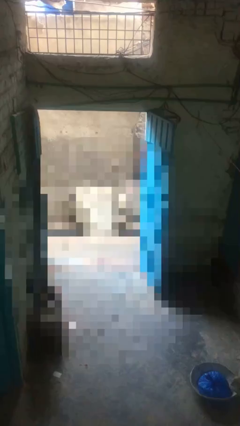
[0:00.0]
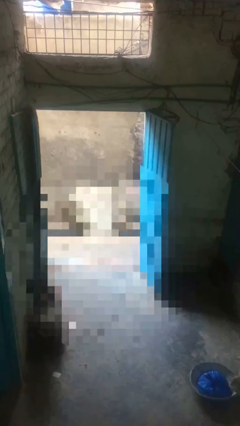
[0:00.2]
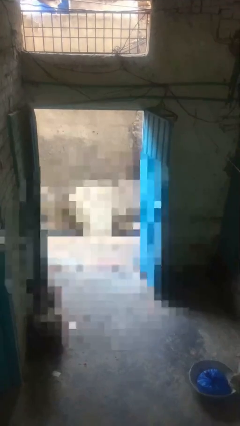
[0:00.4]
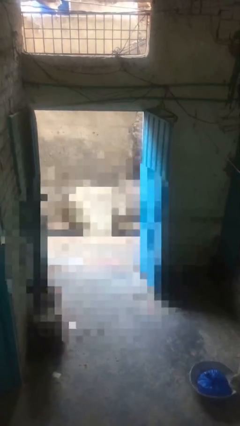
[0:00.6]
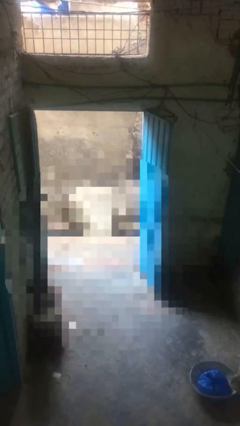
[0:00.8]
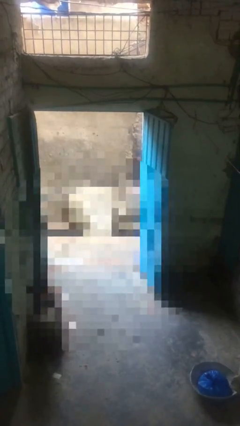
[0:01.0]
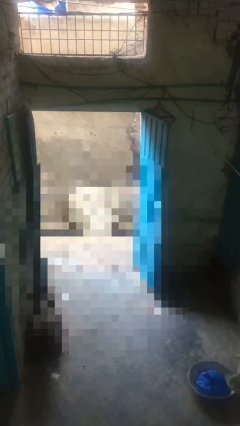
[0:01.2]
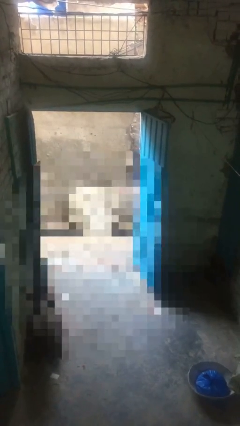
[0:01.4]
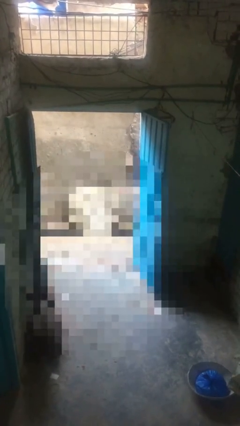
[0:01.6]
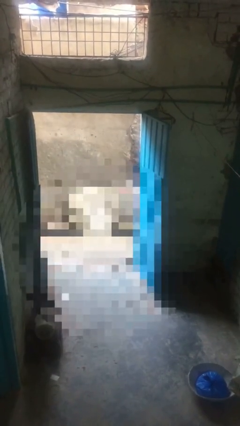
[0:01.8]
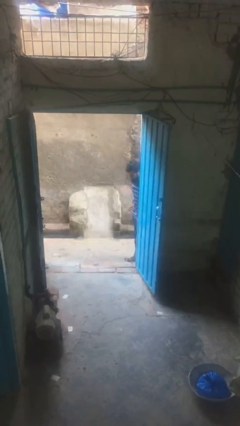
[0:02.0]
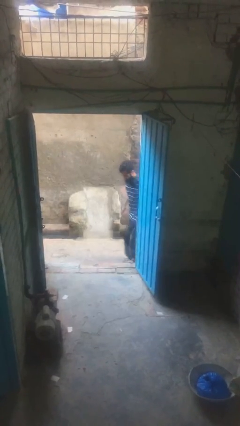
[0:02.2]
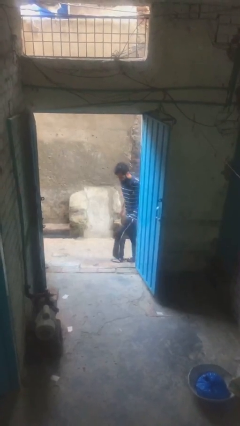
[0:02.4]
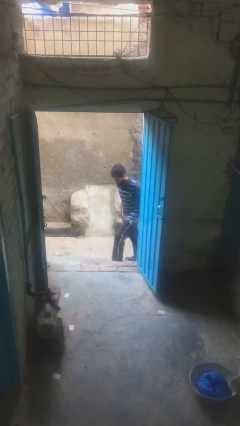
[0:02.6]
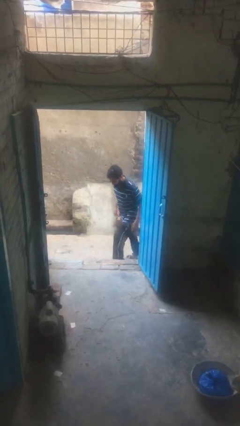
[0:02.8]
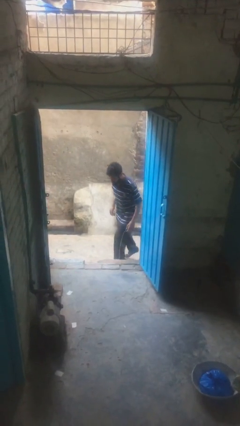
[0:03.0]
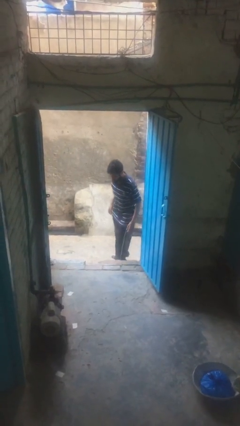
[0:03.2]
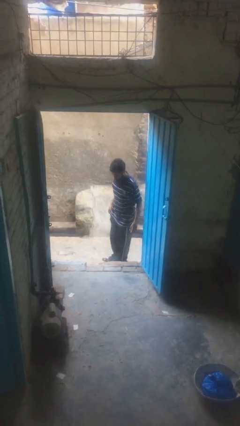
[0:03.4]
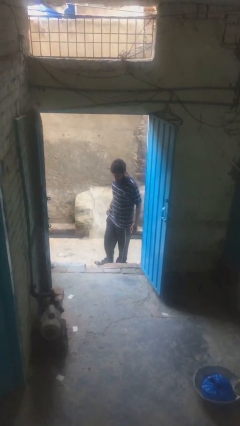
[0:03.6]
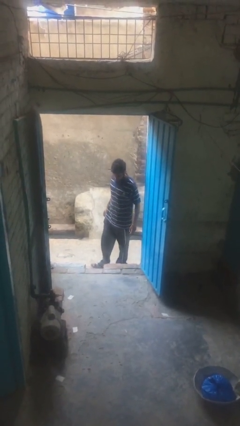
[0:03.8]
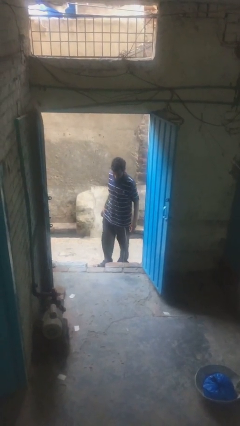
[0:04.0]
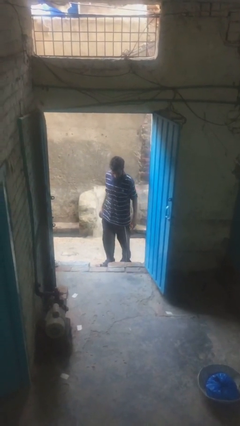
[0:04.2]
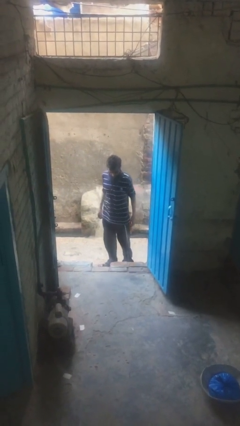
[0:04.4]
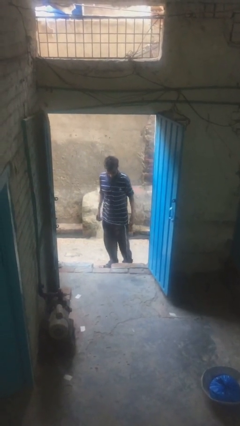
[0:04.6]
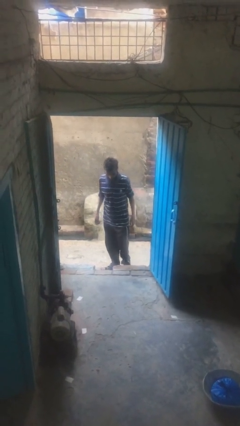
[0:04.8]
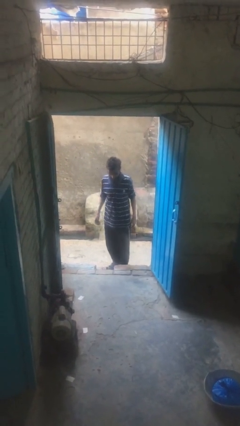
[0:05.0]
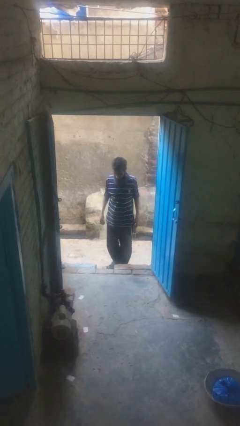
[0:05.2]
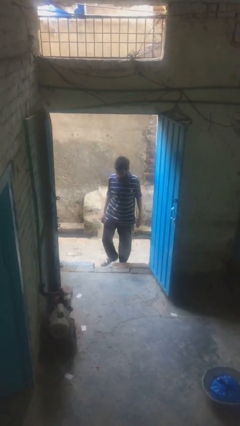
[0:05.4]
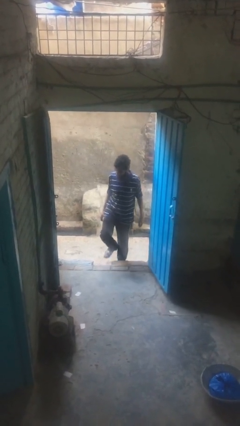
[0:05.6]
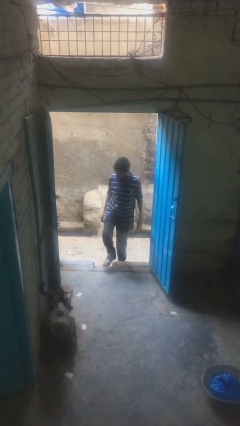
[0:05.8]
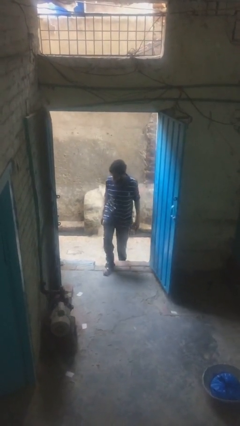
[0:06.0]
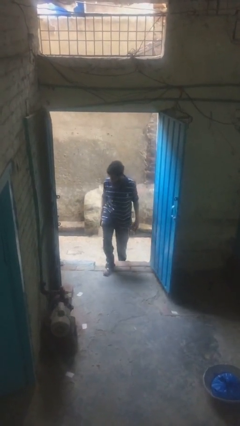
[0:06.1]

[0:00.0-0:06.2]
person enters scene through structure

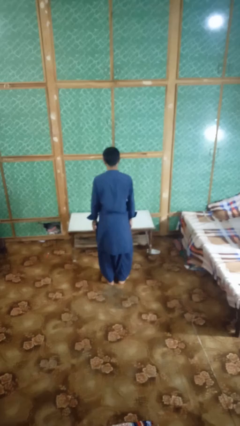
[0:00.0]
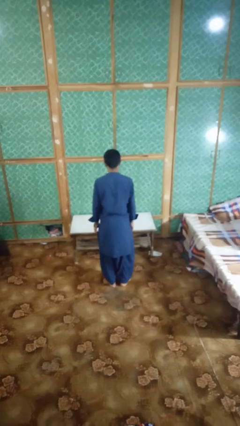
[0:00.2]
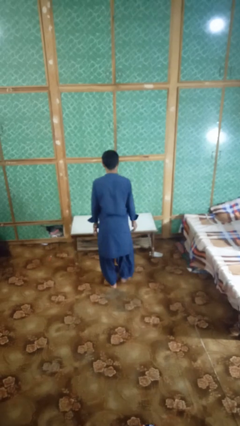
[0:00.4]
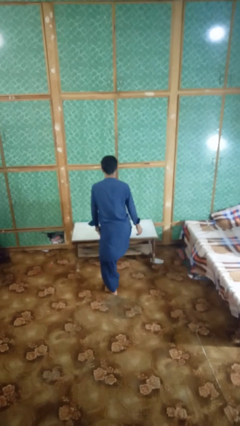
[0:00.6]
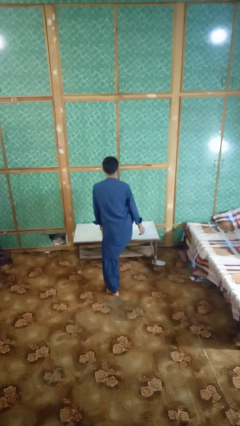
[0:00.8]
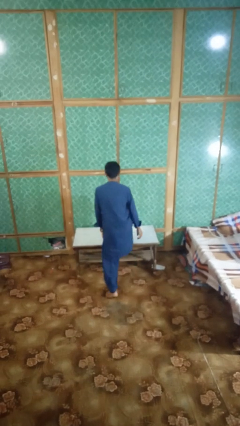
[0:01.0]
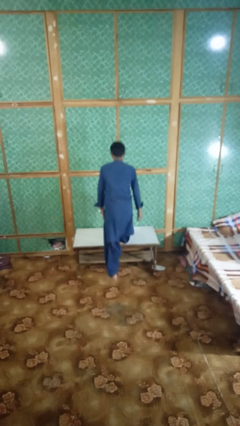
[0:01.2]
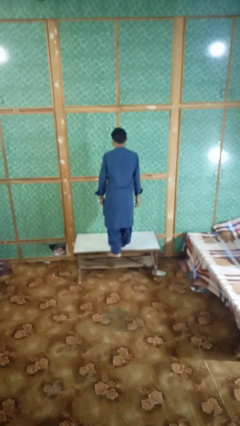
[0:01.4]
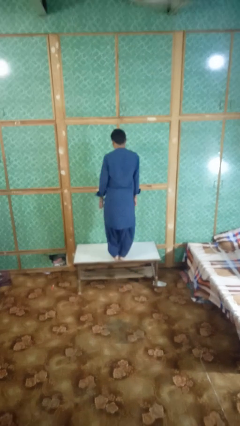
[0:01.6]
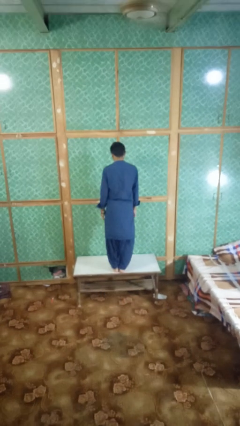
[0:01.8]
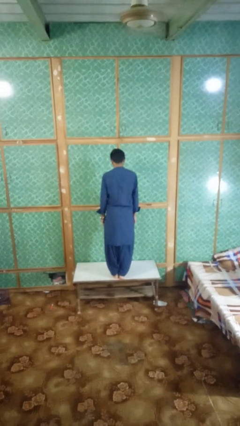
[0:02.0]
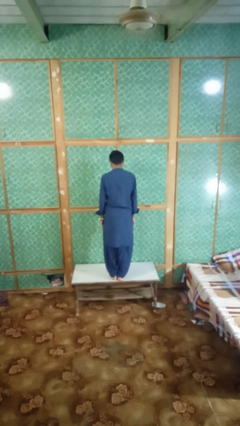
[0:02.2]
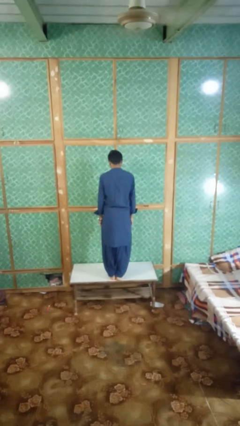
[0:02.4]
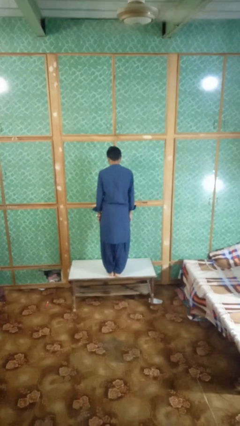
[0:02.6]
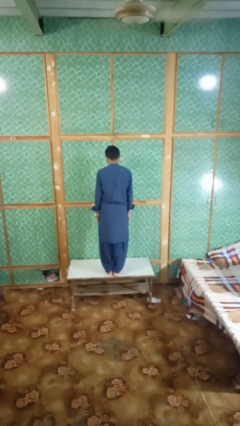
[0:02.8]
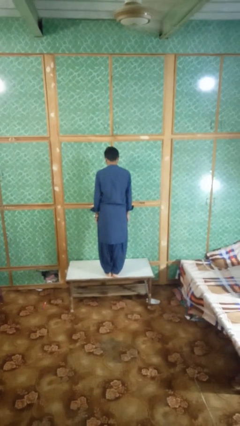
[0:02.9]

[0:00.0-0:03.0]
person climbs on table

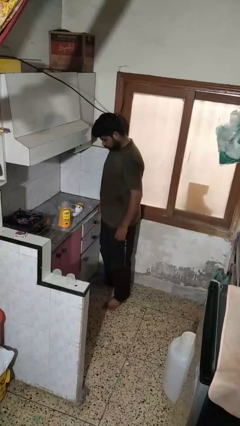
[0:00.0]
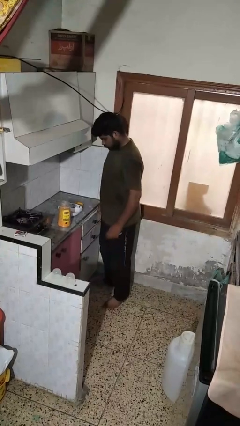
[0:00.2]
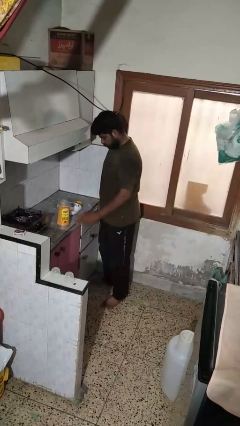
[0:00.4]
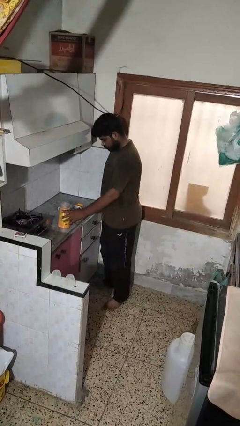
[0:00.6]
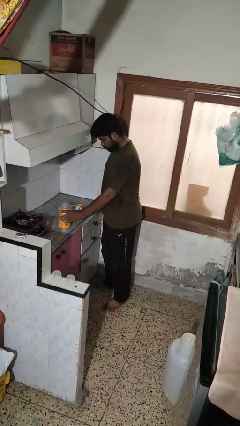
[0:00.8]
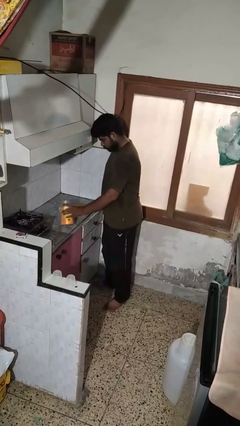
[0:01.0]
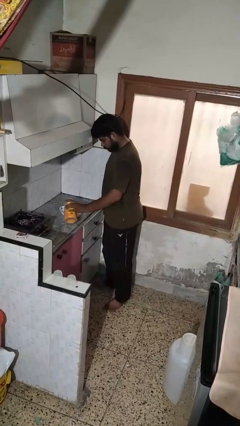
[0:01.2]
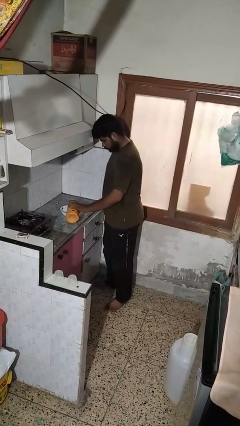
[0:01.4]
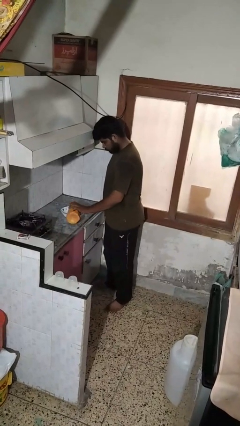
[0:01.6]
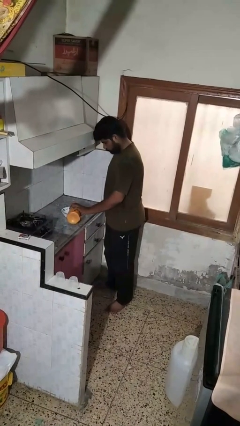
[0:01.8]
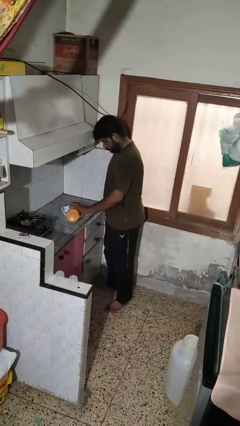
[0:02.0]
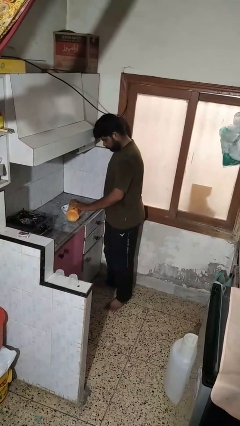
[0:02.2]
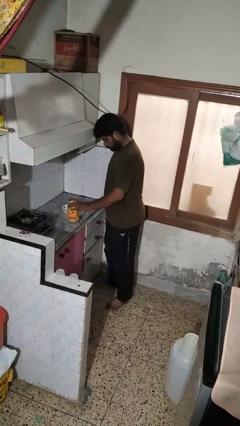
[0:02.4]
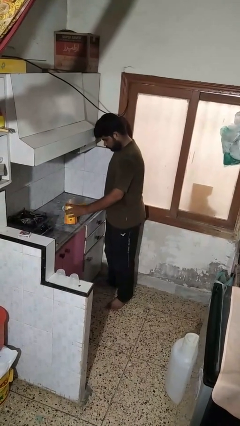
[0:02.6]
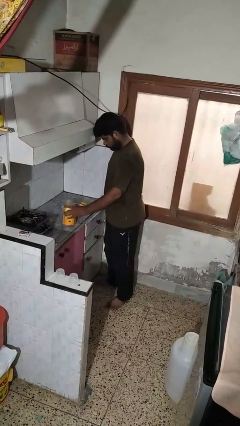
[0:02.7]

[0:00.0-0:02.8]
person pours into bowl

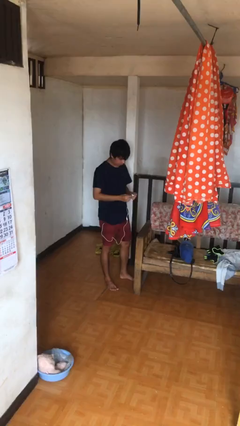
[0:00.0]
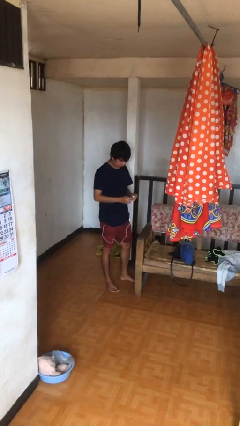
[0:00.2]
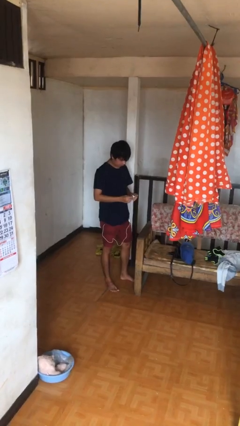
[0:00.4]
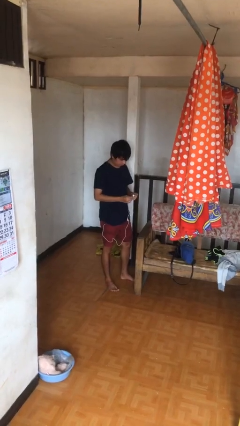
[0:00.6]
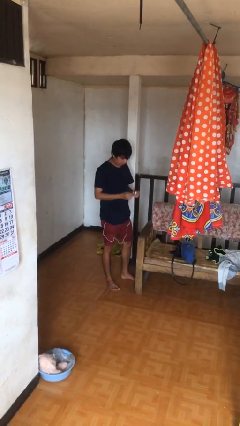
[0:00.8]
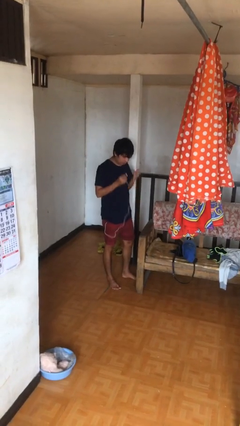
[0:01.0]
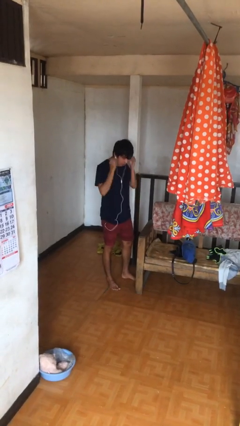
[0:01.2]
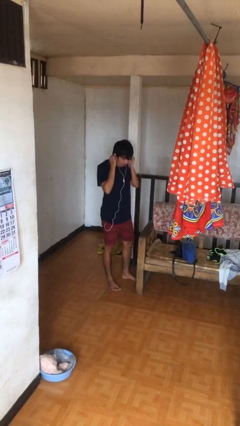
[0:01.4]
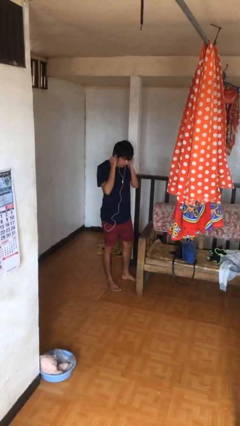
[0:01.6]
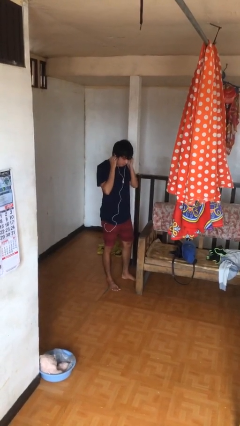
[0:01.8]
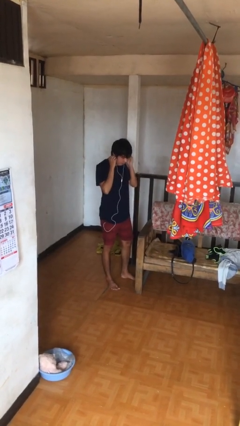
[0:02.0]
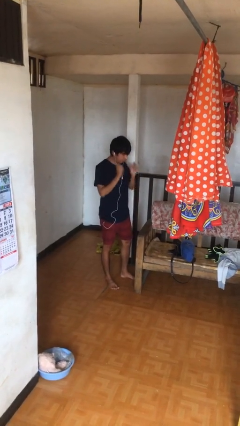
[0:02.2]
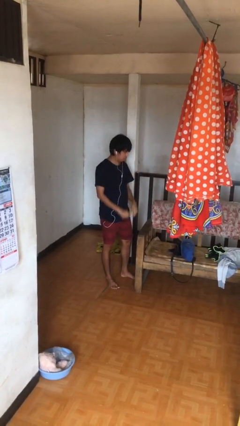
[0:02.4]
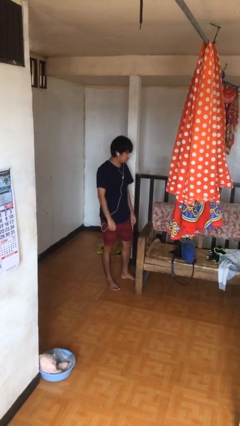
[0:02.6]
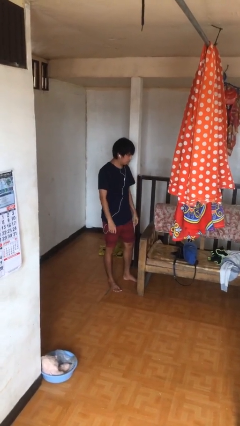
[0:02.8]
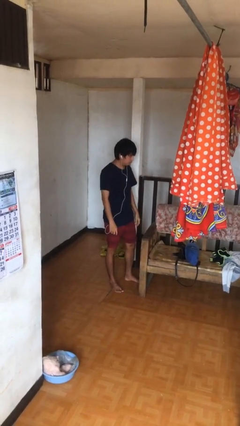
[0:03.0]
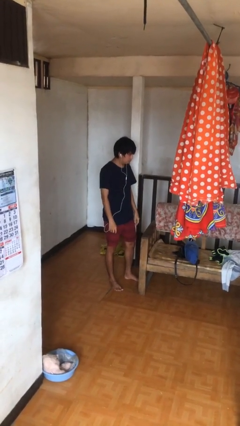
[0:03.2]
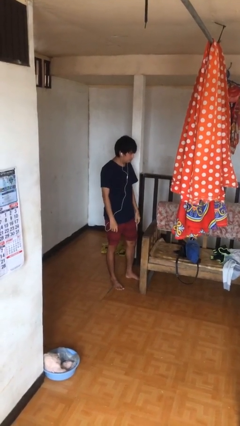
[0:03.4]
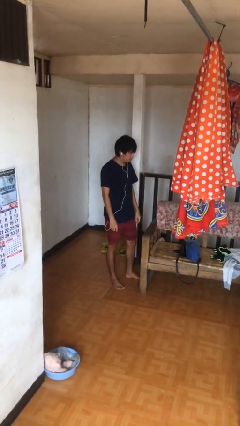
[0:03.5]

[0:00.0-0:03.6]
person puts on headphones

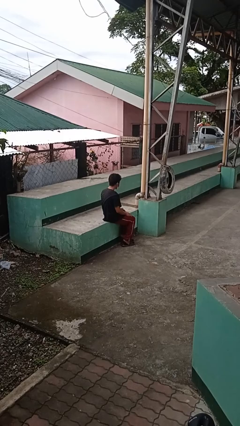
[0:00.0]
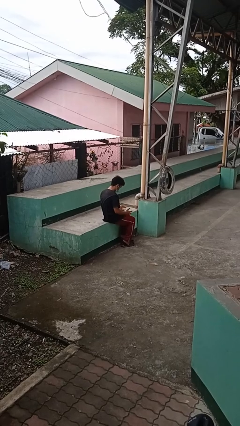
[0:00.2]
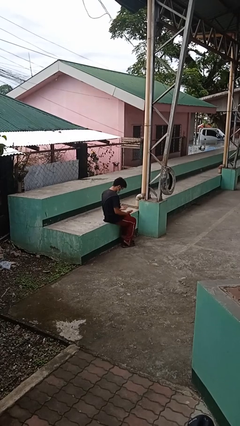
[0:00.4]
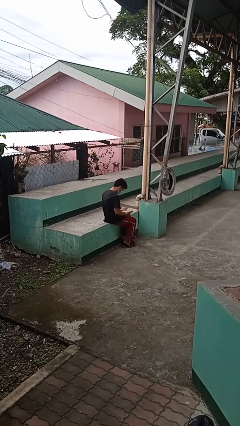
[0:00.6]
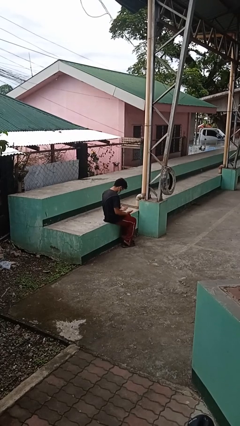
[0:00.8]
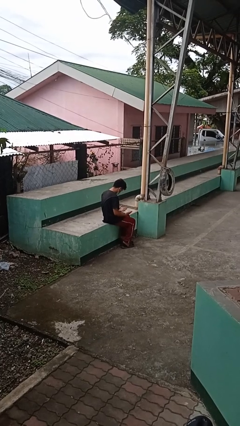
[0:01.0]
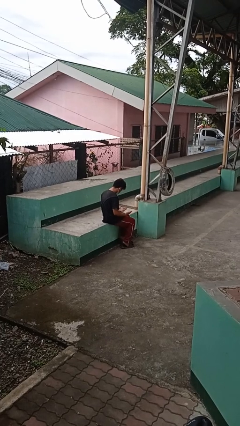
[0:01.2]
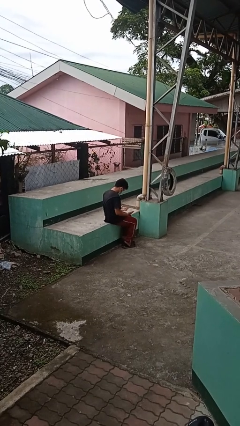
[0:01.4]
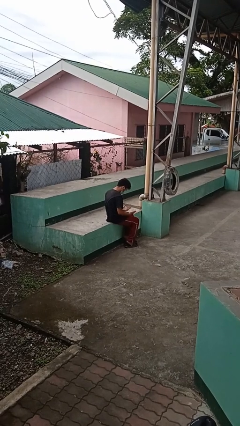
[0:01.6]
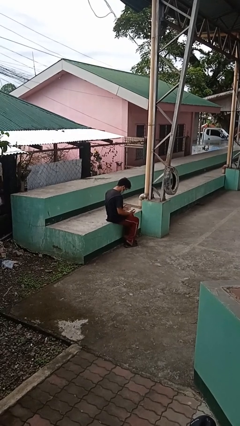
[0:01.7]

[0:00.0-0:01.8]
person looks at hands in lap
